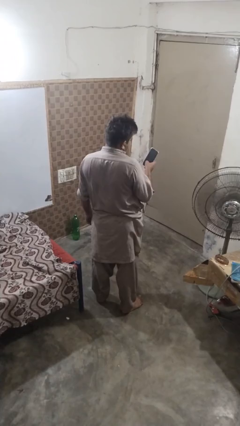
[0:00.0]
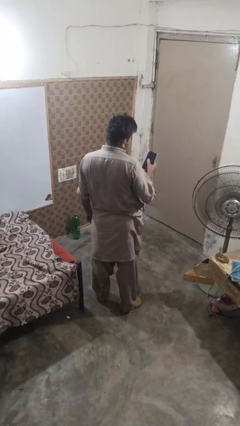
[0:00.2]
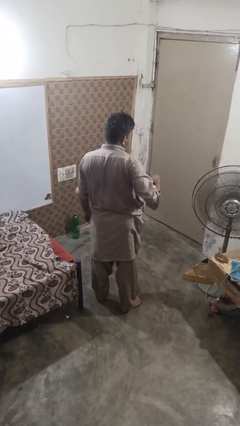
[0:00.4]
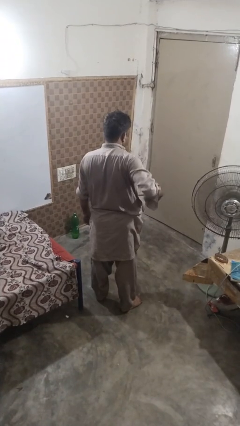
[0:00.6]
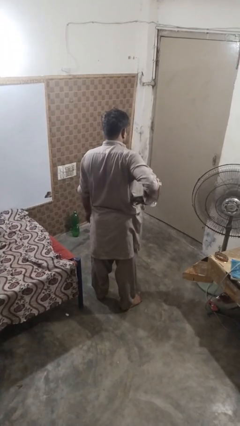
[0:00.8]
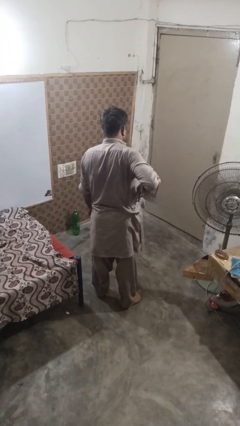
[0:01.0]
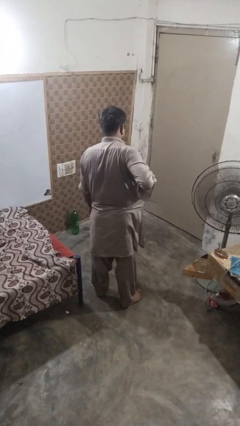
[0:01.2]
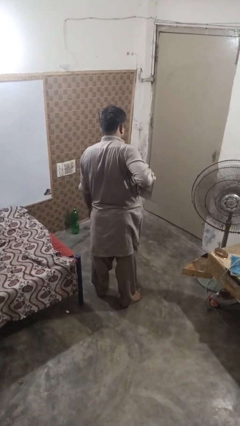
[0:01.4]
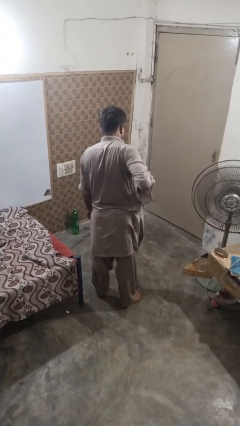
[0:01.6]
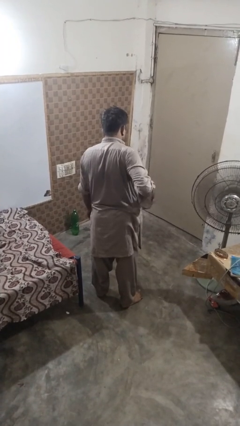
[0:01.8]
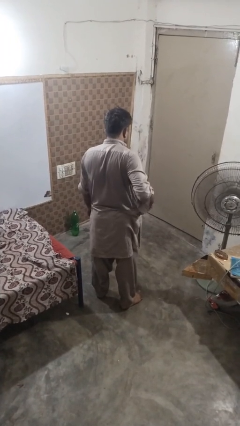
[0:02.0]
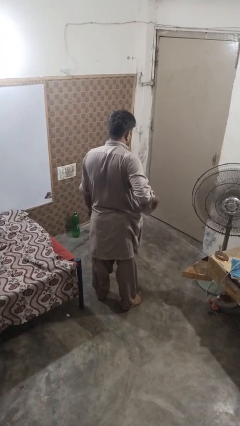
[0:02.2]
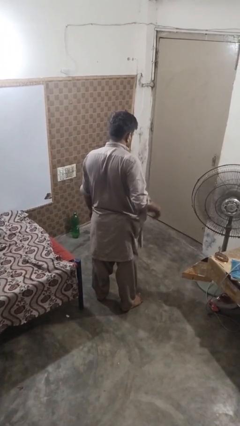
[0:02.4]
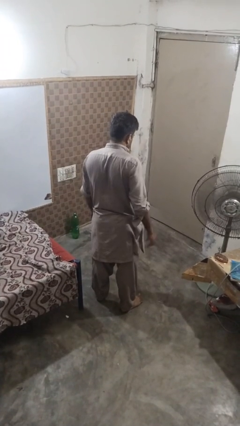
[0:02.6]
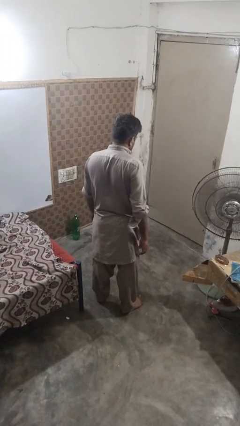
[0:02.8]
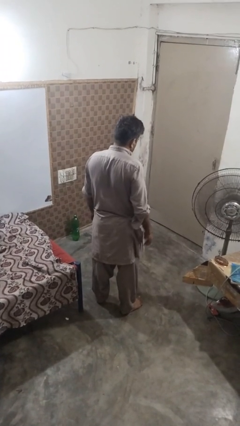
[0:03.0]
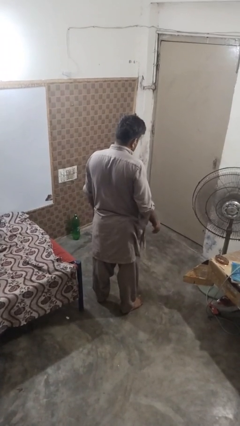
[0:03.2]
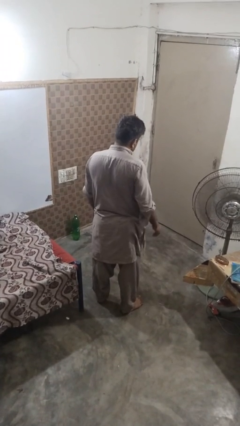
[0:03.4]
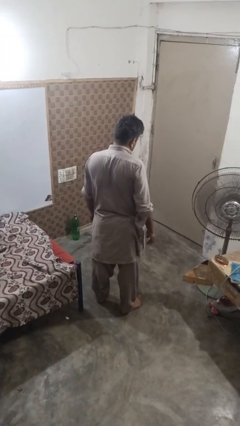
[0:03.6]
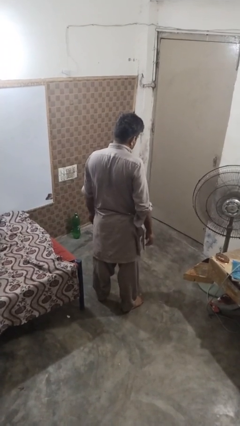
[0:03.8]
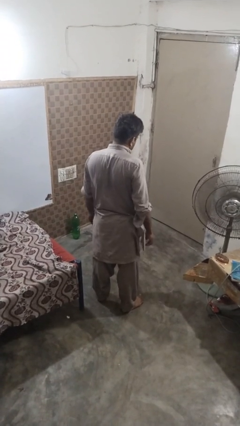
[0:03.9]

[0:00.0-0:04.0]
person puts phone into pocket

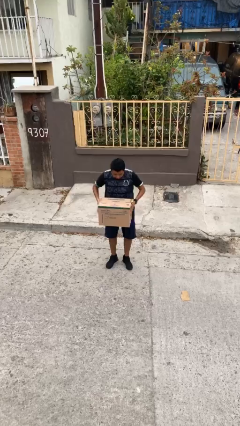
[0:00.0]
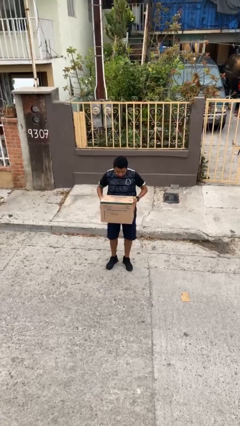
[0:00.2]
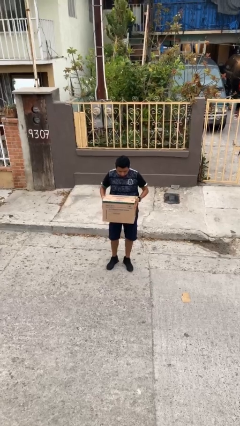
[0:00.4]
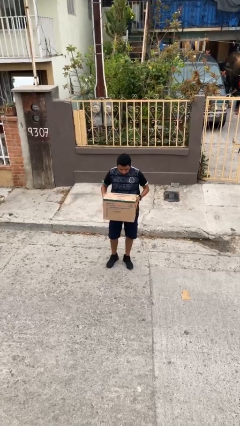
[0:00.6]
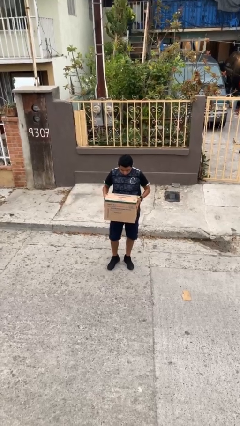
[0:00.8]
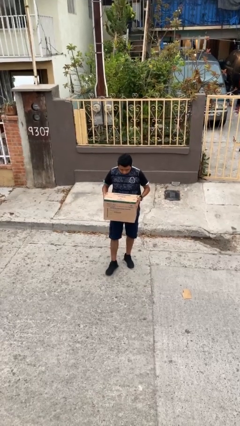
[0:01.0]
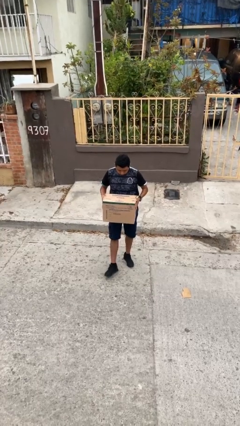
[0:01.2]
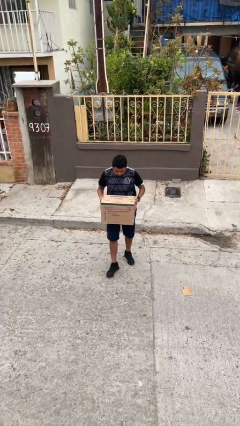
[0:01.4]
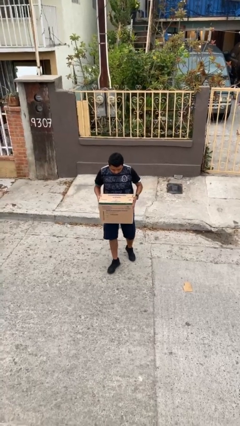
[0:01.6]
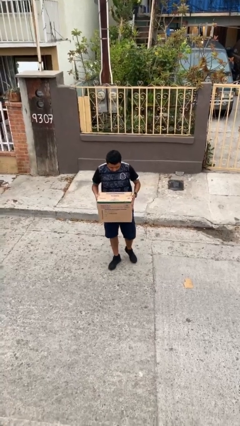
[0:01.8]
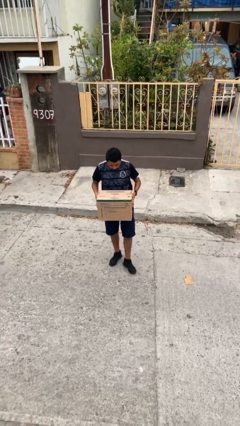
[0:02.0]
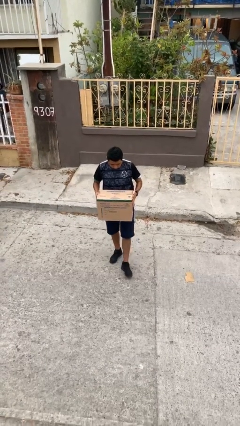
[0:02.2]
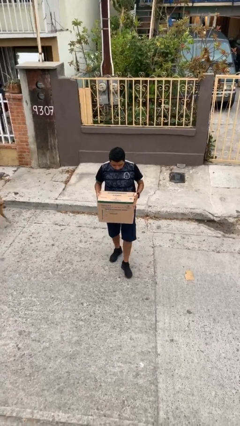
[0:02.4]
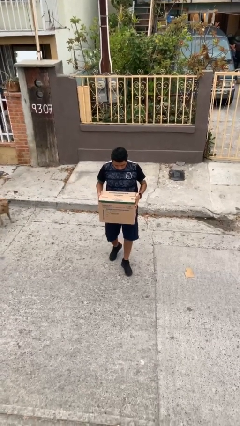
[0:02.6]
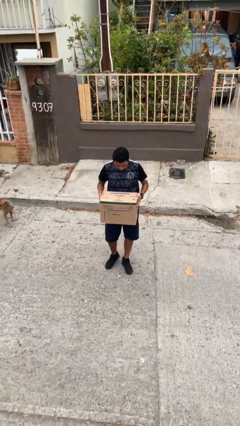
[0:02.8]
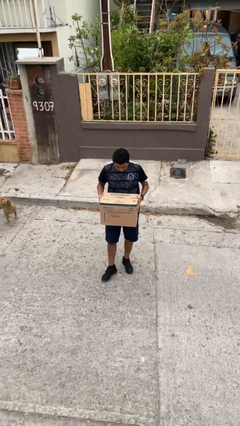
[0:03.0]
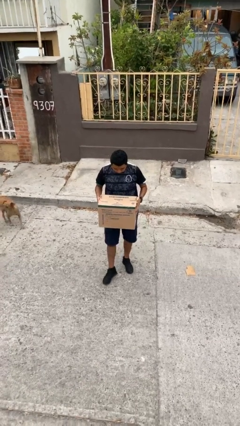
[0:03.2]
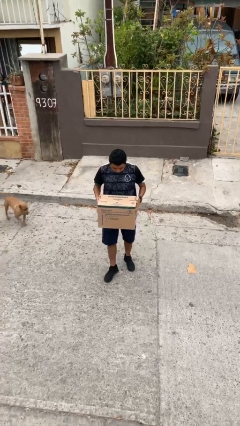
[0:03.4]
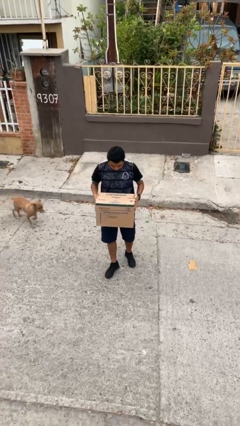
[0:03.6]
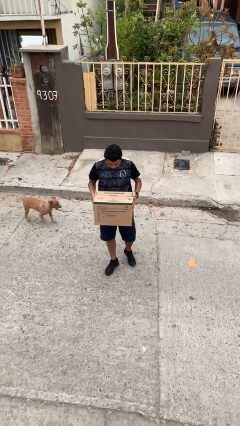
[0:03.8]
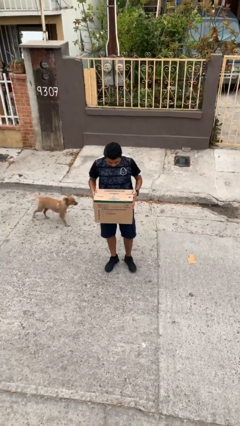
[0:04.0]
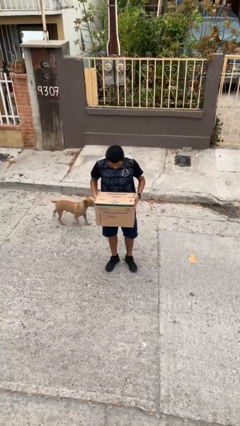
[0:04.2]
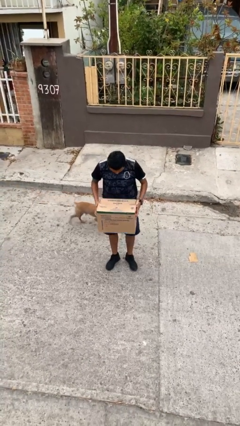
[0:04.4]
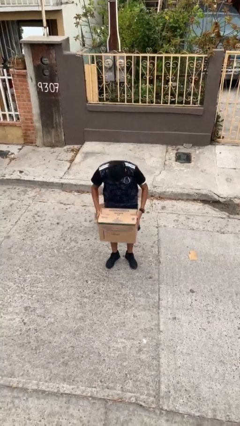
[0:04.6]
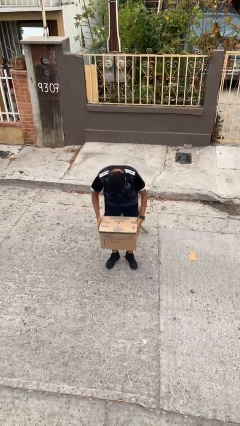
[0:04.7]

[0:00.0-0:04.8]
person carries heavy object

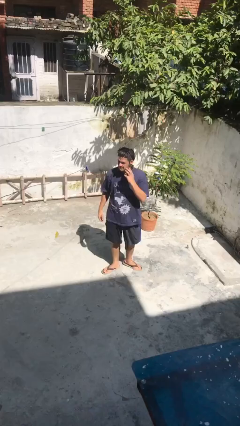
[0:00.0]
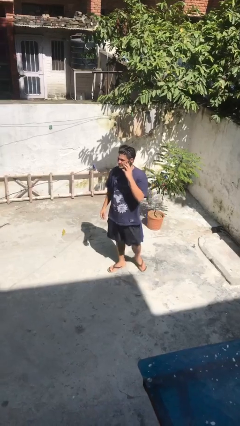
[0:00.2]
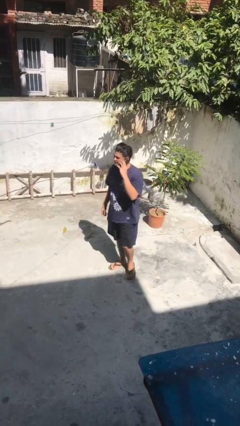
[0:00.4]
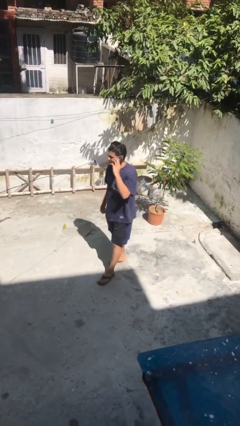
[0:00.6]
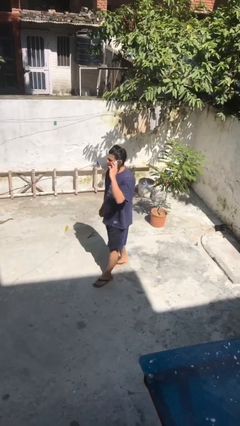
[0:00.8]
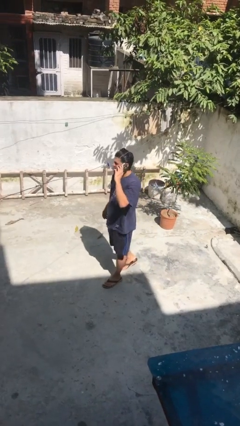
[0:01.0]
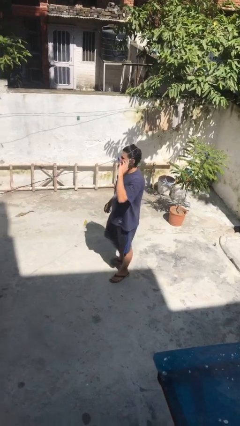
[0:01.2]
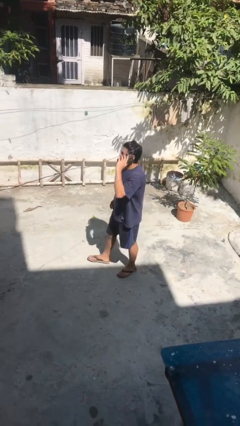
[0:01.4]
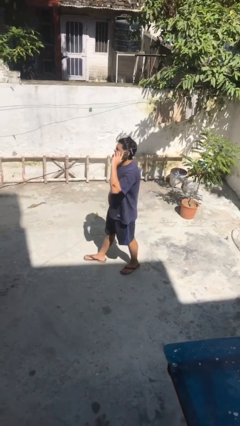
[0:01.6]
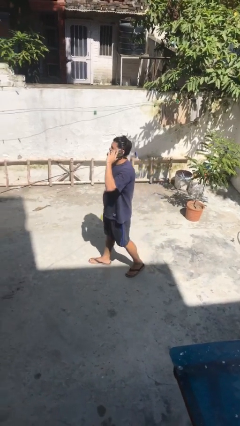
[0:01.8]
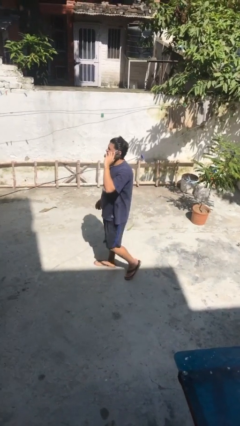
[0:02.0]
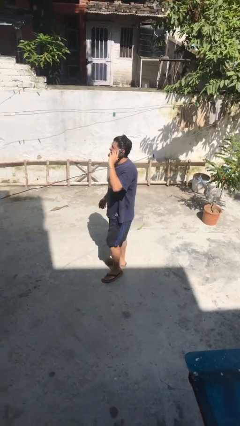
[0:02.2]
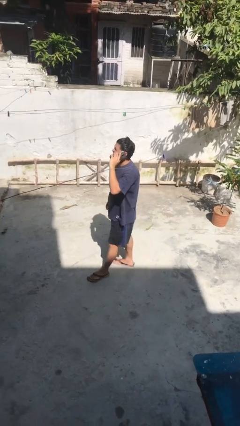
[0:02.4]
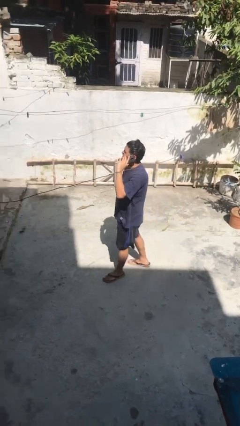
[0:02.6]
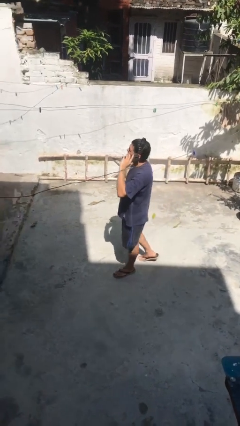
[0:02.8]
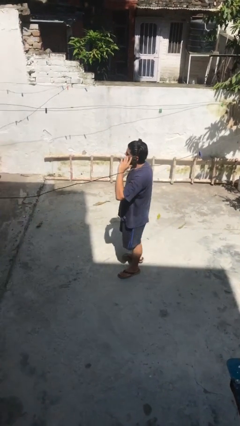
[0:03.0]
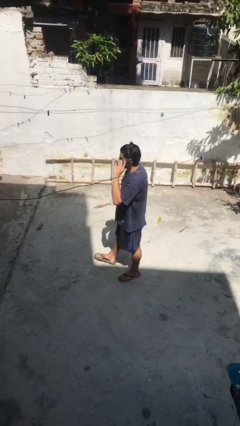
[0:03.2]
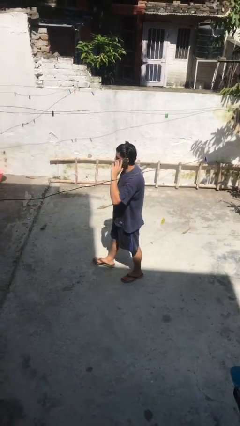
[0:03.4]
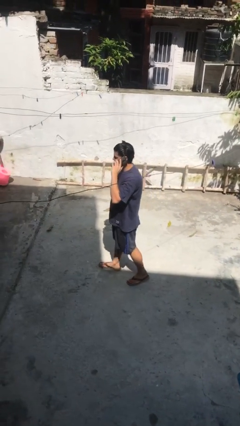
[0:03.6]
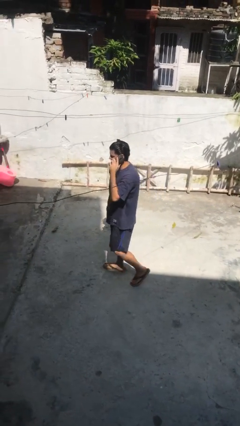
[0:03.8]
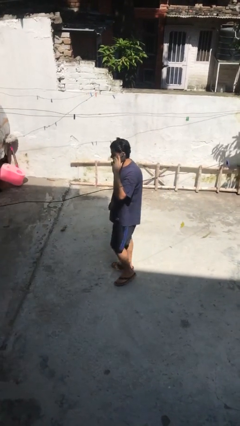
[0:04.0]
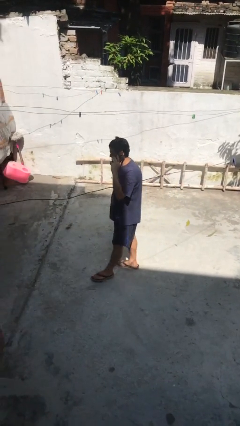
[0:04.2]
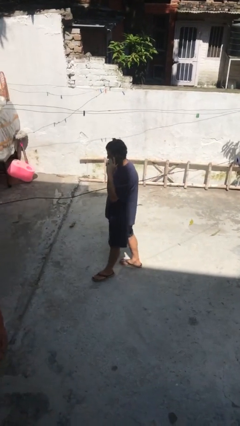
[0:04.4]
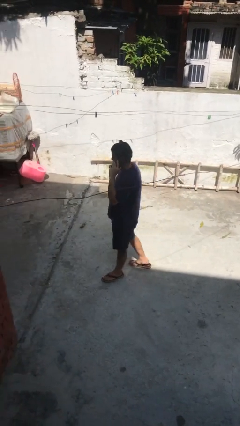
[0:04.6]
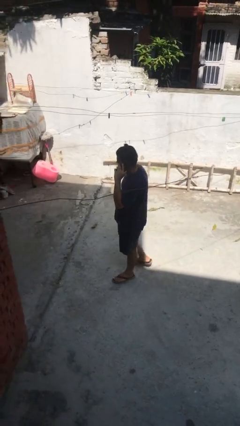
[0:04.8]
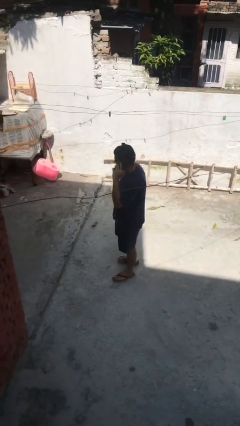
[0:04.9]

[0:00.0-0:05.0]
person talks on phone

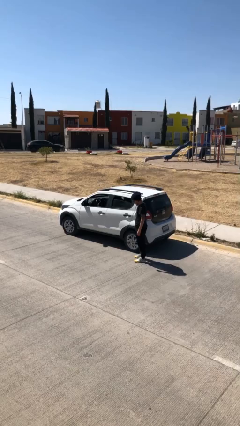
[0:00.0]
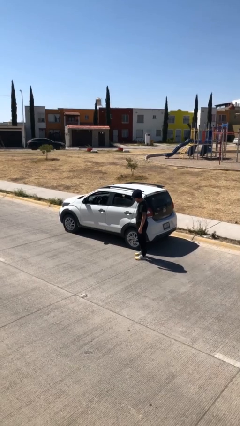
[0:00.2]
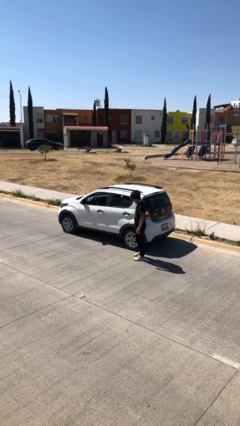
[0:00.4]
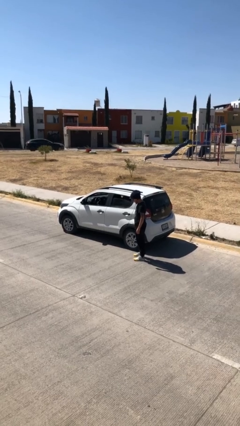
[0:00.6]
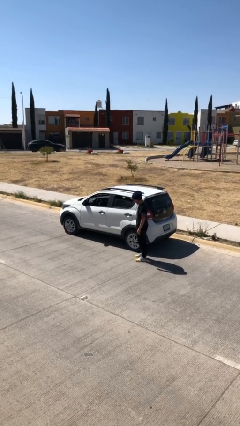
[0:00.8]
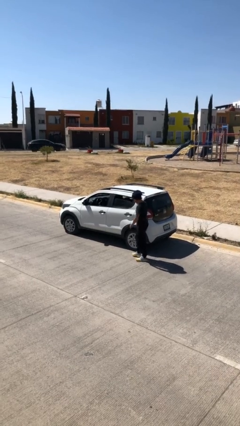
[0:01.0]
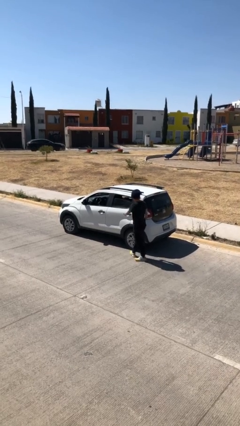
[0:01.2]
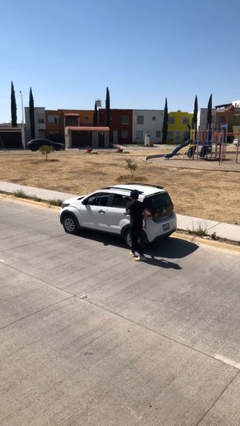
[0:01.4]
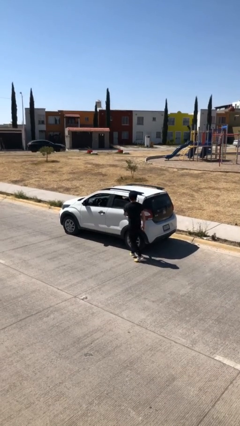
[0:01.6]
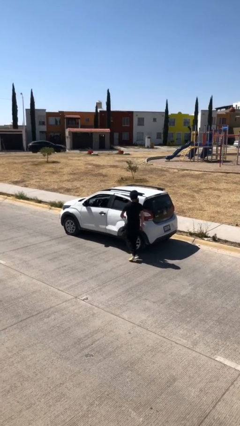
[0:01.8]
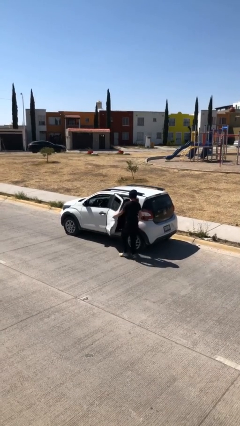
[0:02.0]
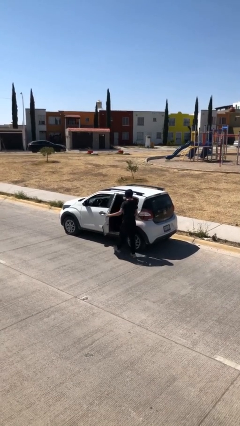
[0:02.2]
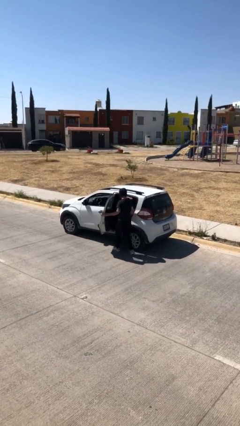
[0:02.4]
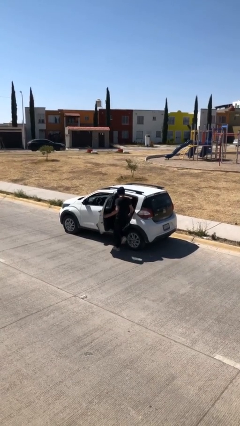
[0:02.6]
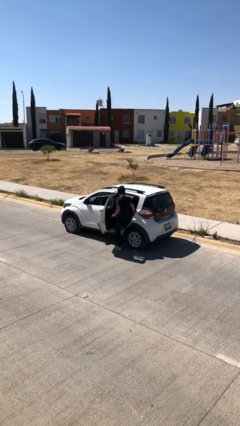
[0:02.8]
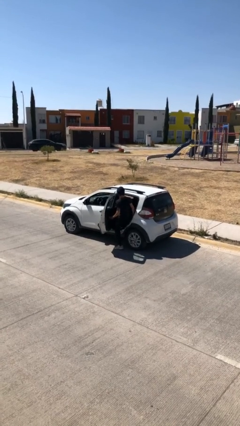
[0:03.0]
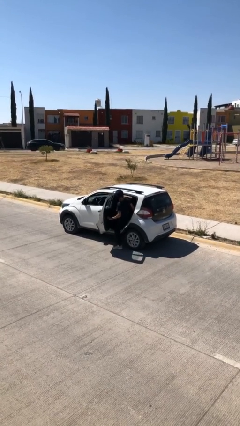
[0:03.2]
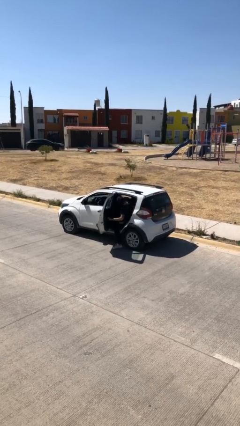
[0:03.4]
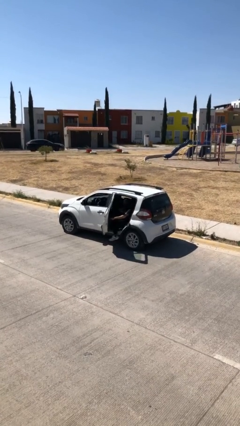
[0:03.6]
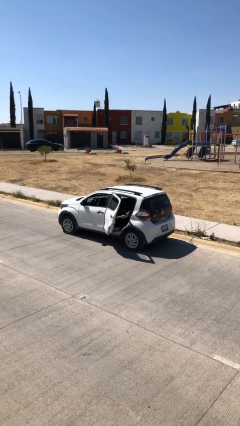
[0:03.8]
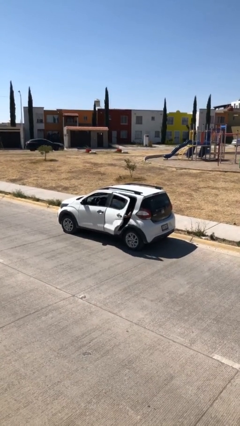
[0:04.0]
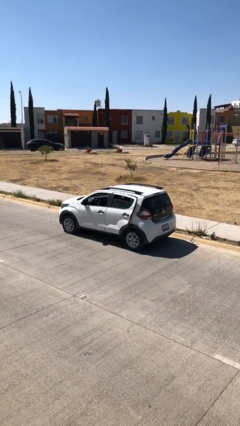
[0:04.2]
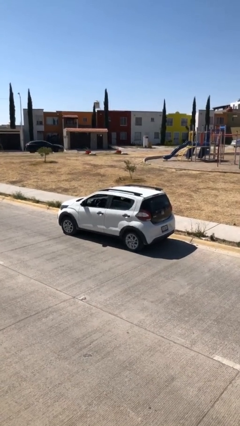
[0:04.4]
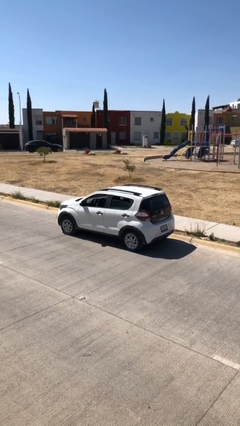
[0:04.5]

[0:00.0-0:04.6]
car picks up person
